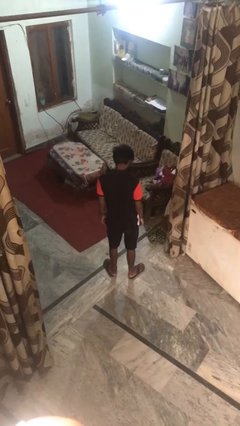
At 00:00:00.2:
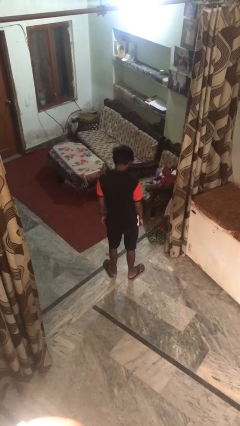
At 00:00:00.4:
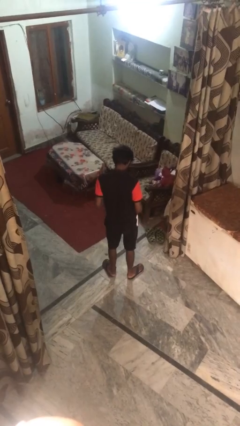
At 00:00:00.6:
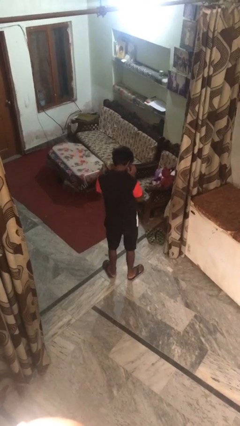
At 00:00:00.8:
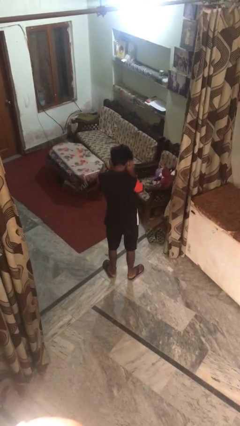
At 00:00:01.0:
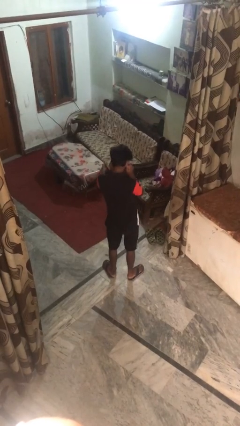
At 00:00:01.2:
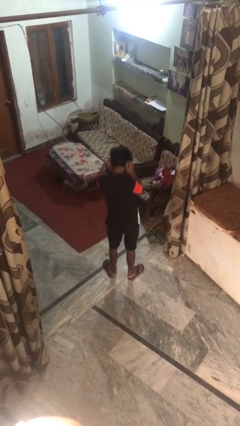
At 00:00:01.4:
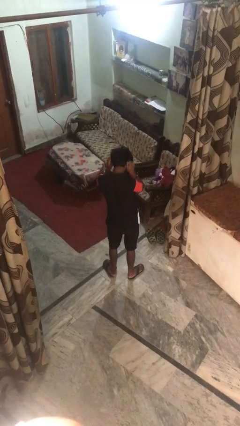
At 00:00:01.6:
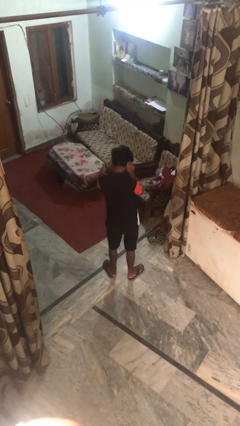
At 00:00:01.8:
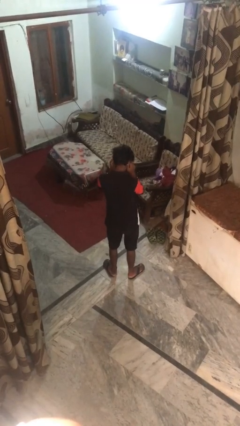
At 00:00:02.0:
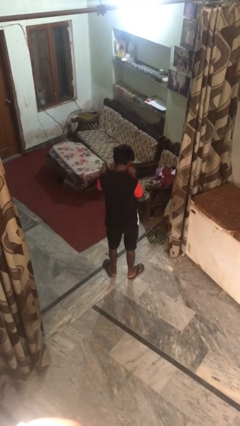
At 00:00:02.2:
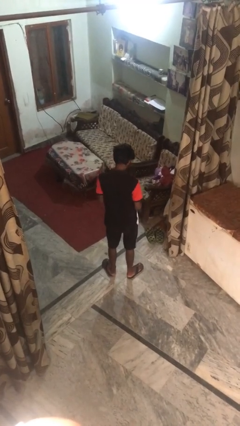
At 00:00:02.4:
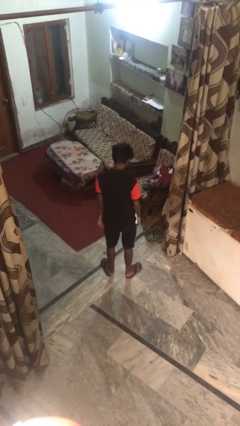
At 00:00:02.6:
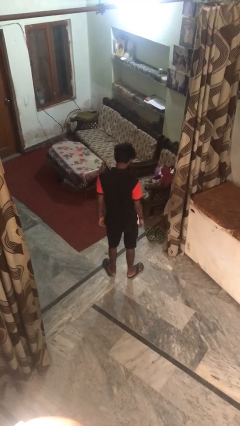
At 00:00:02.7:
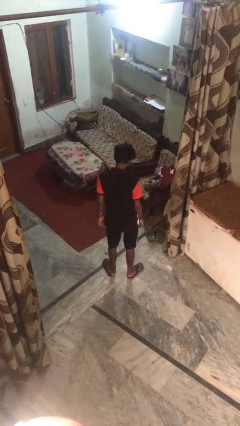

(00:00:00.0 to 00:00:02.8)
person touches earlobe

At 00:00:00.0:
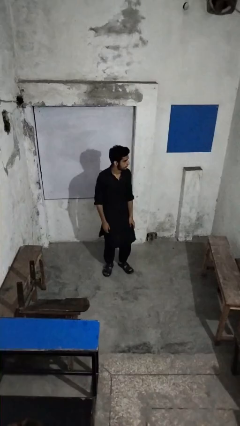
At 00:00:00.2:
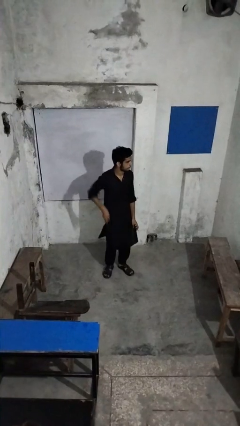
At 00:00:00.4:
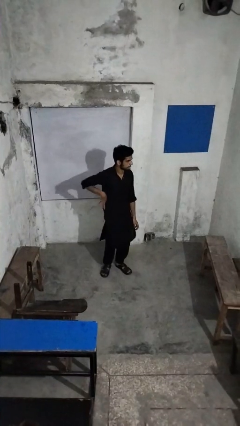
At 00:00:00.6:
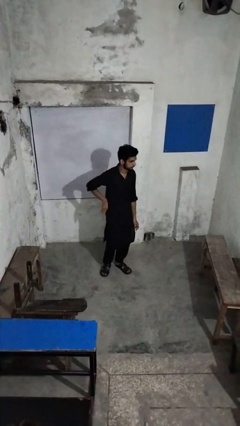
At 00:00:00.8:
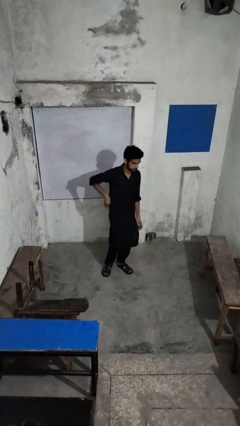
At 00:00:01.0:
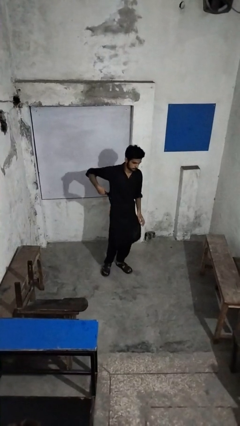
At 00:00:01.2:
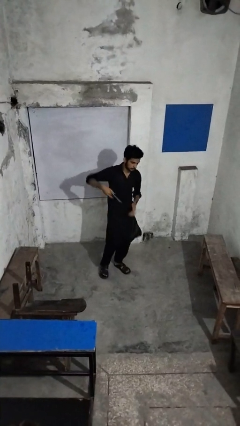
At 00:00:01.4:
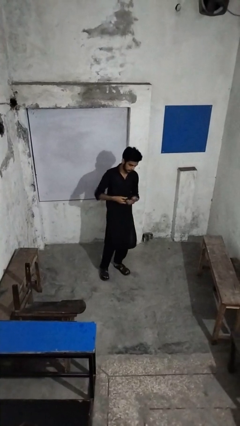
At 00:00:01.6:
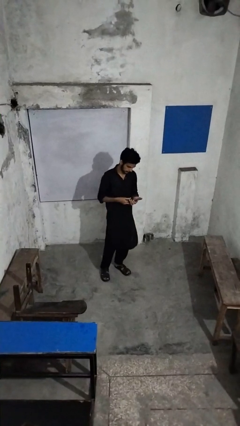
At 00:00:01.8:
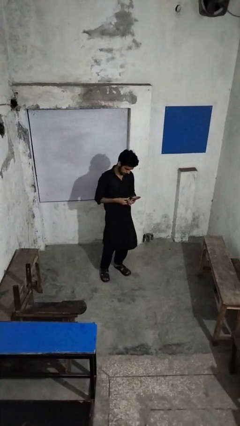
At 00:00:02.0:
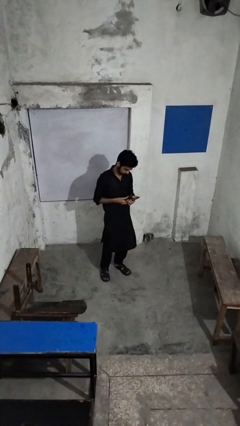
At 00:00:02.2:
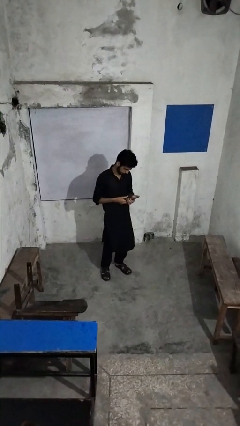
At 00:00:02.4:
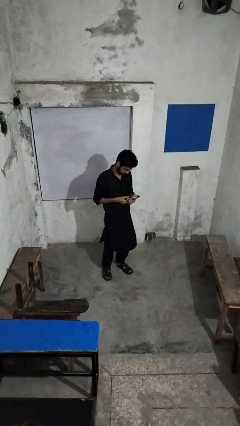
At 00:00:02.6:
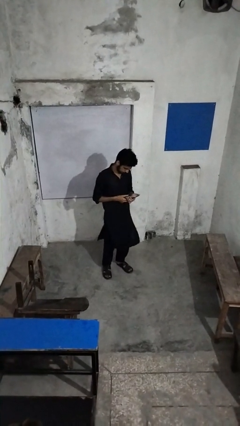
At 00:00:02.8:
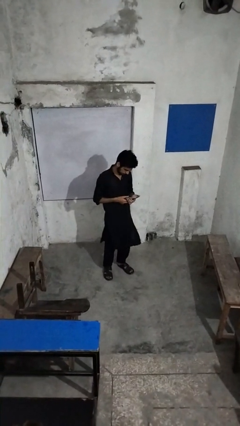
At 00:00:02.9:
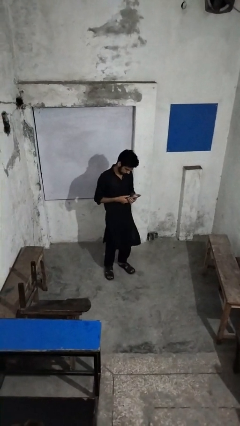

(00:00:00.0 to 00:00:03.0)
person takes phone from pocket

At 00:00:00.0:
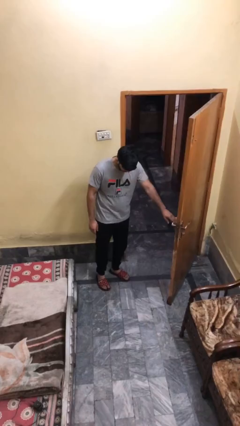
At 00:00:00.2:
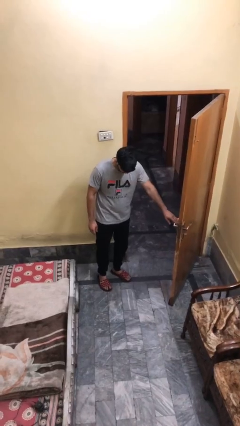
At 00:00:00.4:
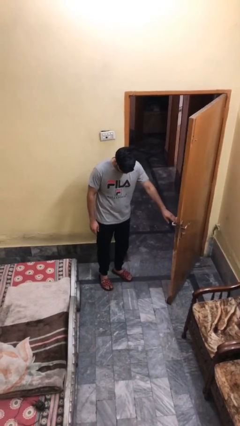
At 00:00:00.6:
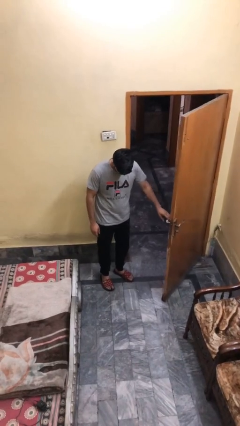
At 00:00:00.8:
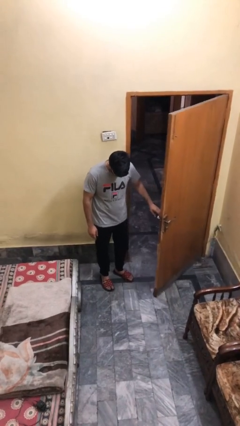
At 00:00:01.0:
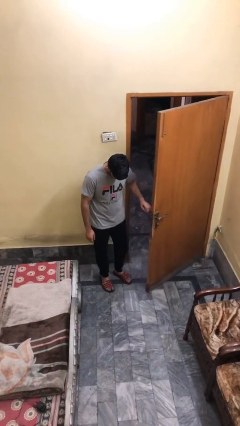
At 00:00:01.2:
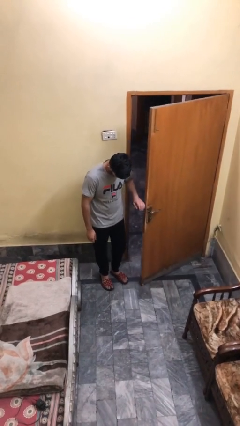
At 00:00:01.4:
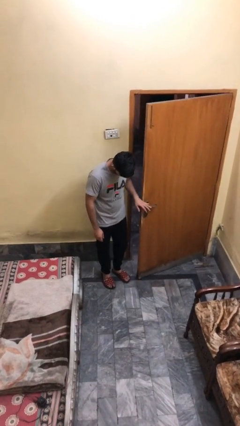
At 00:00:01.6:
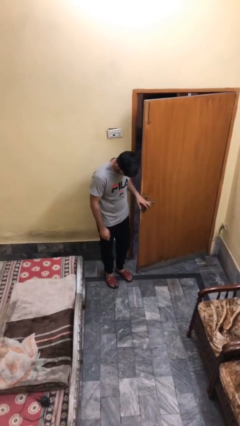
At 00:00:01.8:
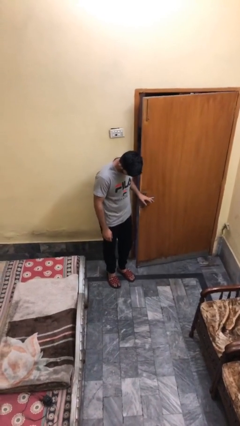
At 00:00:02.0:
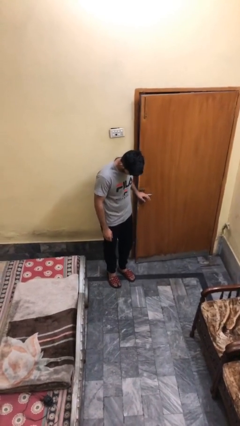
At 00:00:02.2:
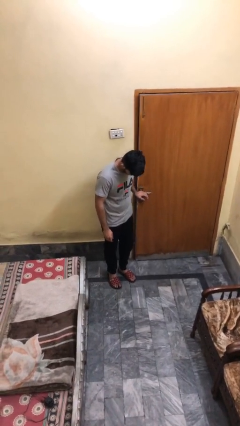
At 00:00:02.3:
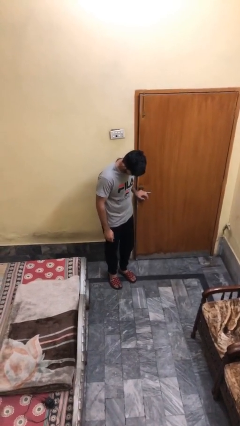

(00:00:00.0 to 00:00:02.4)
person closes facility door

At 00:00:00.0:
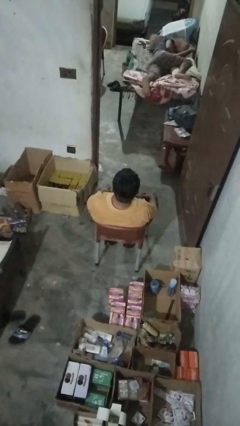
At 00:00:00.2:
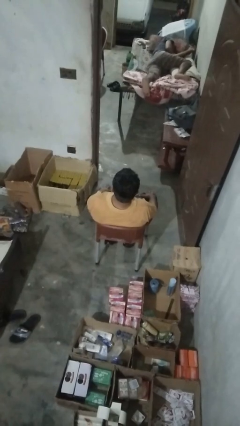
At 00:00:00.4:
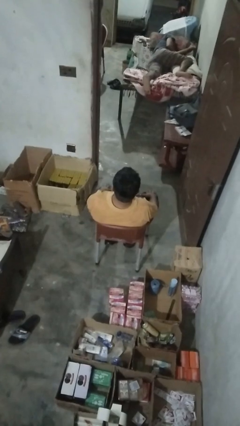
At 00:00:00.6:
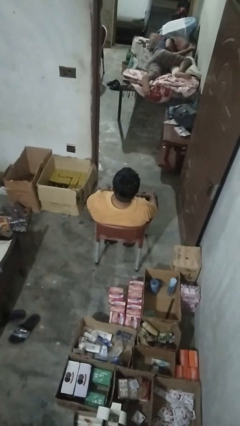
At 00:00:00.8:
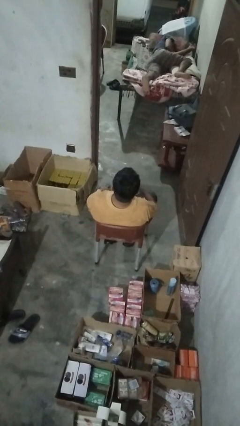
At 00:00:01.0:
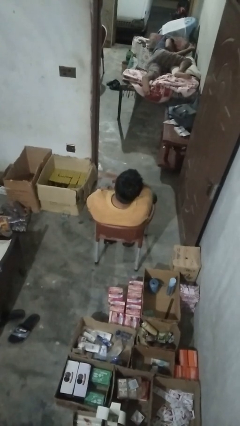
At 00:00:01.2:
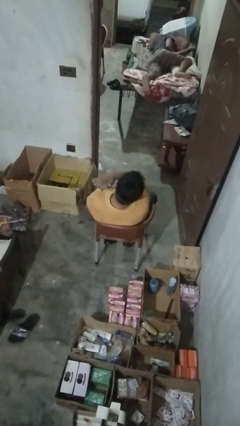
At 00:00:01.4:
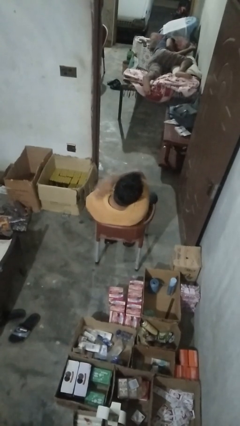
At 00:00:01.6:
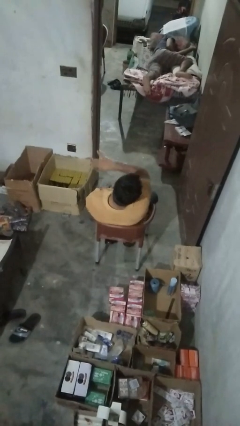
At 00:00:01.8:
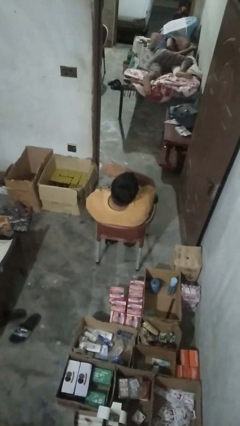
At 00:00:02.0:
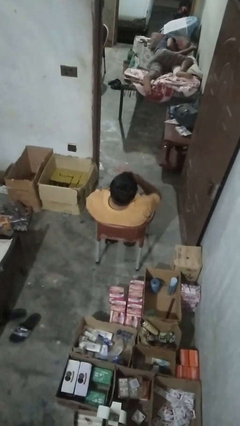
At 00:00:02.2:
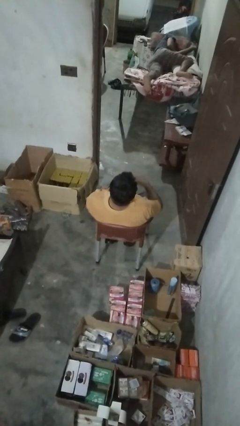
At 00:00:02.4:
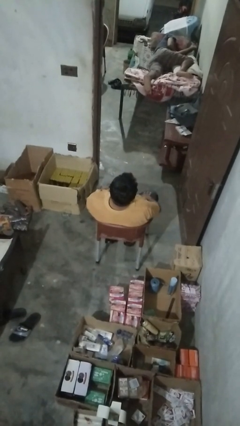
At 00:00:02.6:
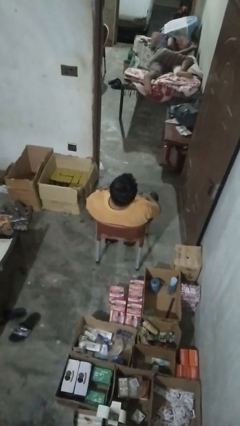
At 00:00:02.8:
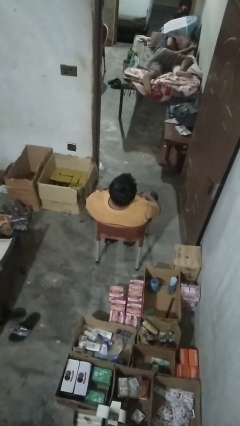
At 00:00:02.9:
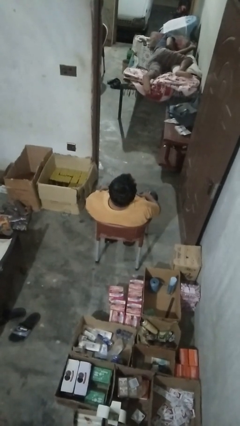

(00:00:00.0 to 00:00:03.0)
person swats bug

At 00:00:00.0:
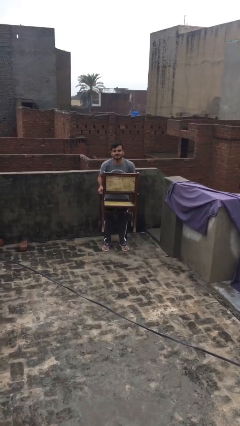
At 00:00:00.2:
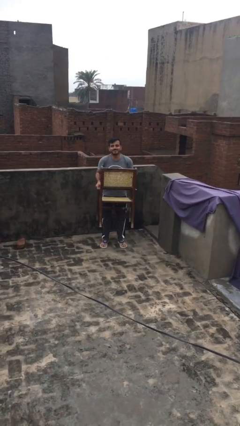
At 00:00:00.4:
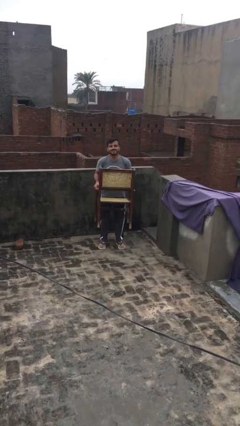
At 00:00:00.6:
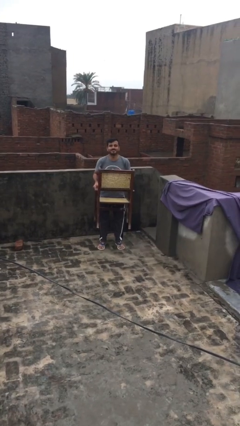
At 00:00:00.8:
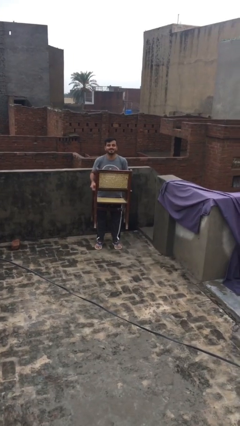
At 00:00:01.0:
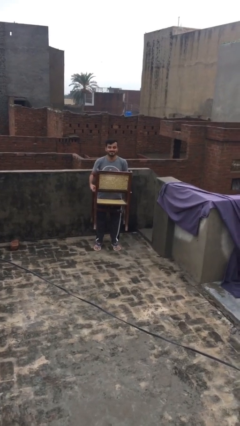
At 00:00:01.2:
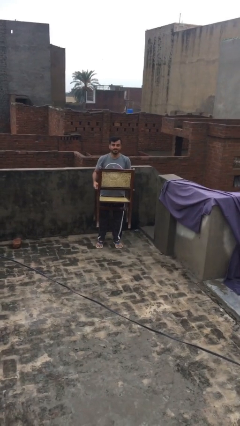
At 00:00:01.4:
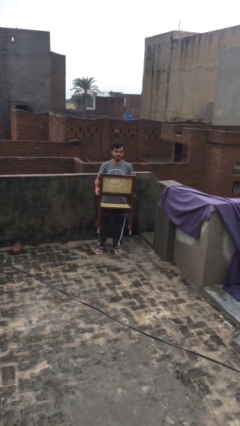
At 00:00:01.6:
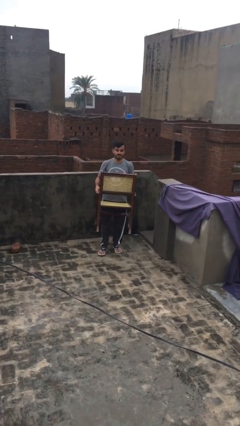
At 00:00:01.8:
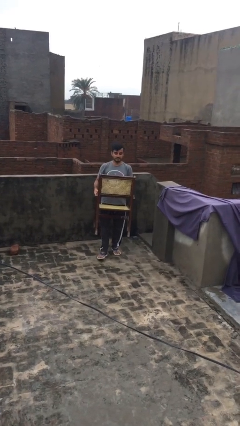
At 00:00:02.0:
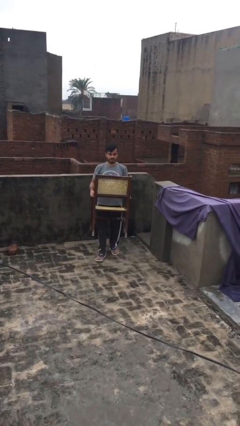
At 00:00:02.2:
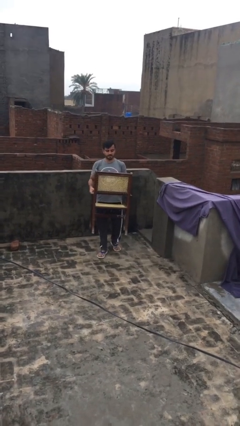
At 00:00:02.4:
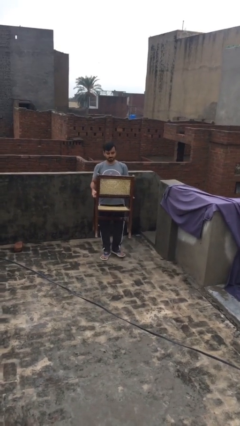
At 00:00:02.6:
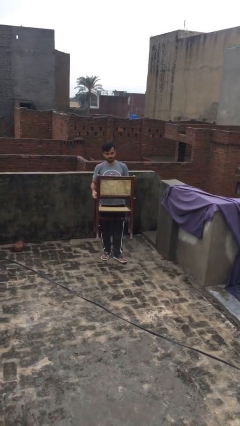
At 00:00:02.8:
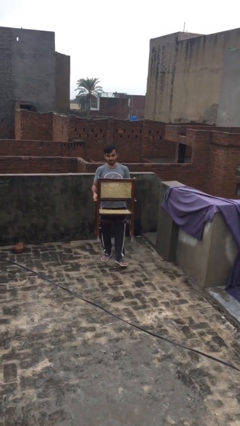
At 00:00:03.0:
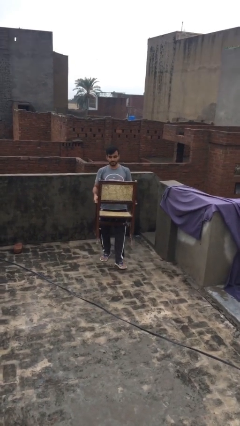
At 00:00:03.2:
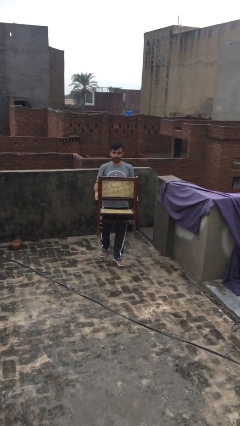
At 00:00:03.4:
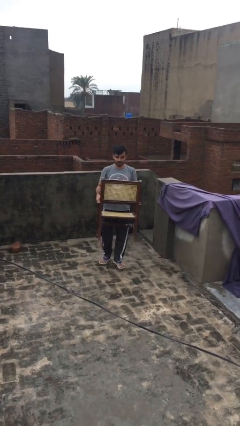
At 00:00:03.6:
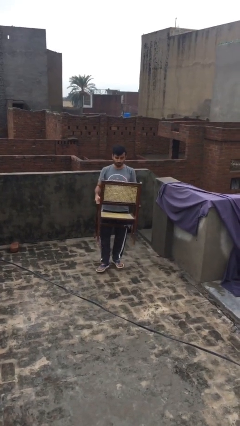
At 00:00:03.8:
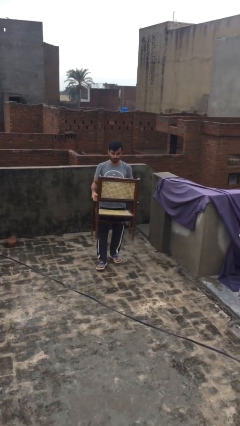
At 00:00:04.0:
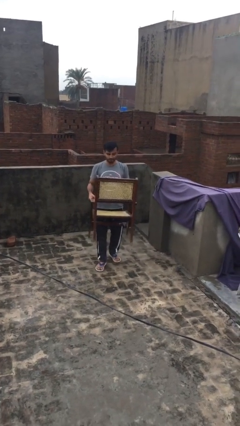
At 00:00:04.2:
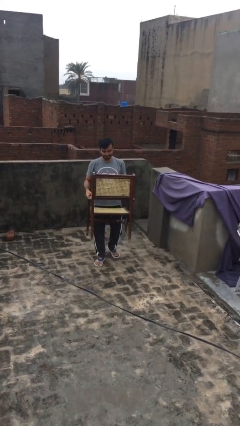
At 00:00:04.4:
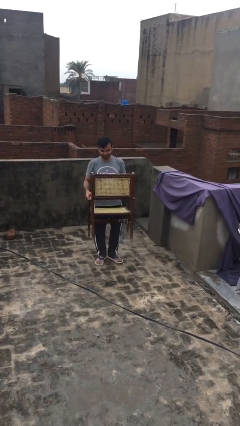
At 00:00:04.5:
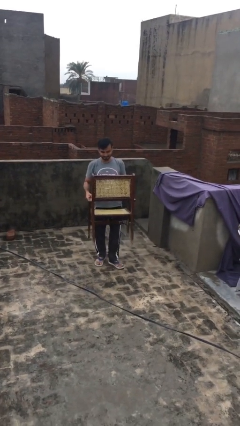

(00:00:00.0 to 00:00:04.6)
person carries heavy object

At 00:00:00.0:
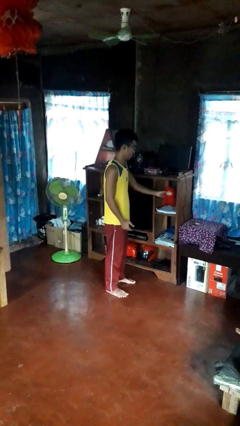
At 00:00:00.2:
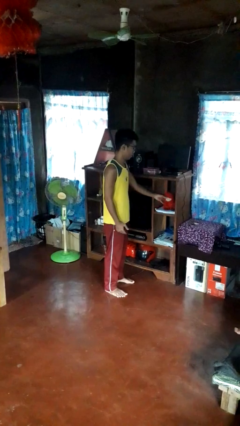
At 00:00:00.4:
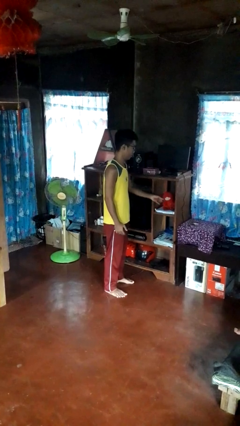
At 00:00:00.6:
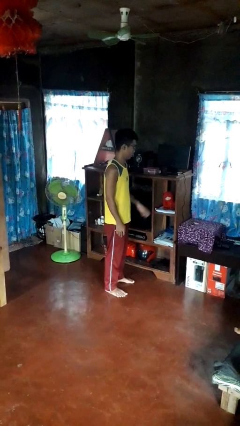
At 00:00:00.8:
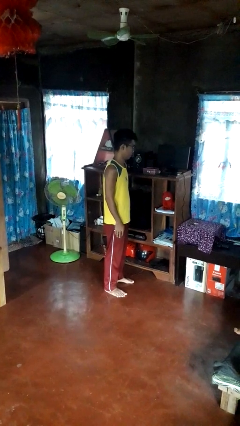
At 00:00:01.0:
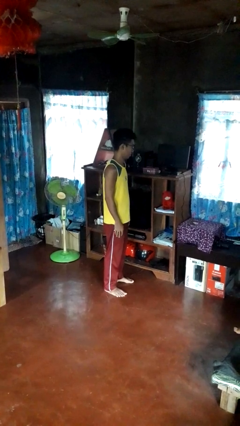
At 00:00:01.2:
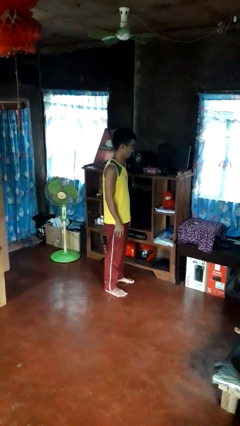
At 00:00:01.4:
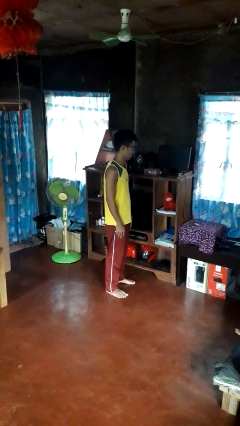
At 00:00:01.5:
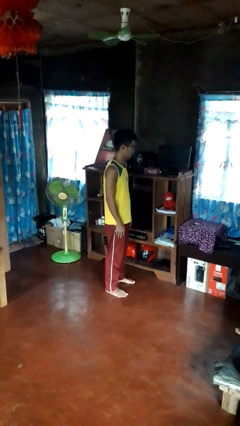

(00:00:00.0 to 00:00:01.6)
person puts down object on shelf
